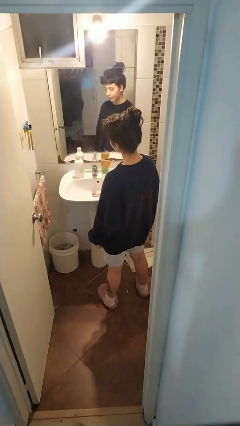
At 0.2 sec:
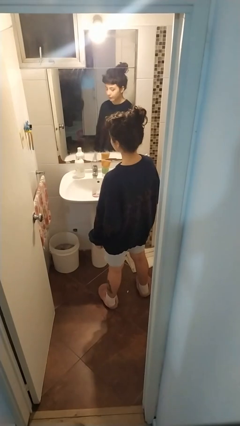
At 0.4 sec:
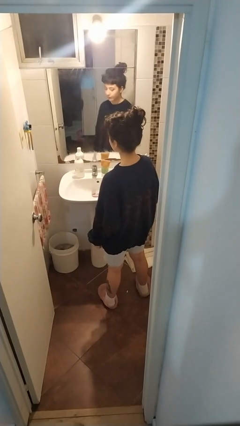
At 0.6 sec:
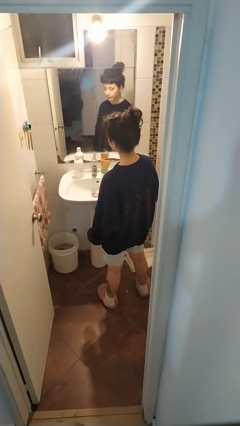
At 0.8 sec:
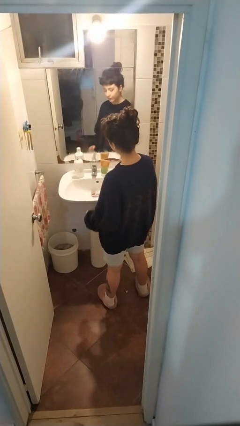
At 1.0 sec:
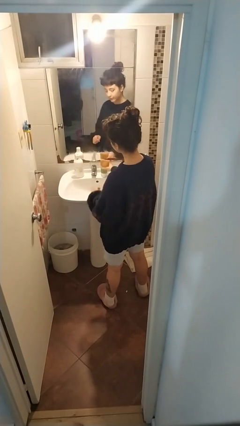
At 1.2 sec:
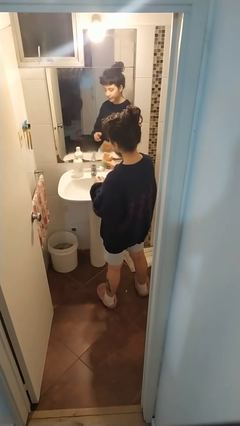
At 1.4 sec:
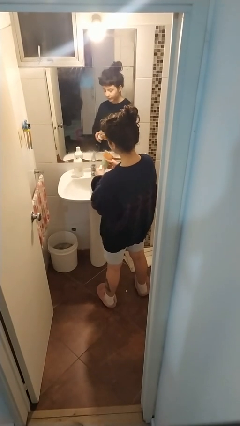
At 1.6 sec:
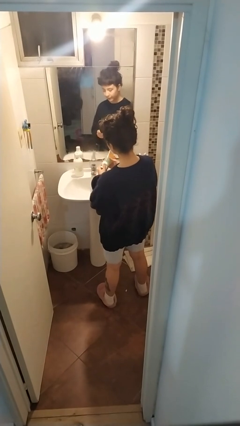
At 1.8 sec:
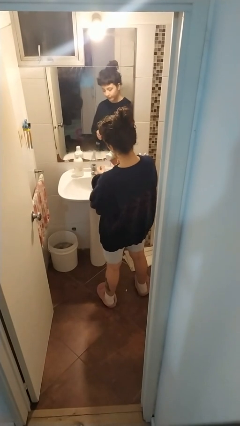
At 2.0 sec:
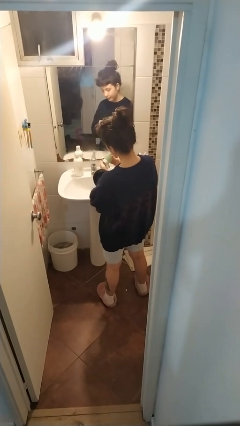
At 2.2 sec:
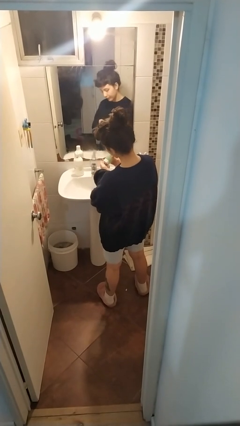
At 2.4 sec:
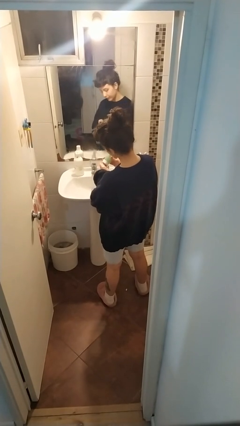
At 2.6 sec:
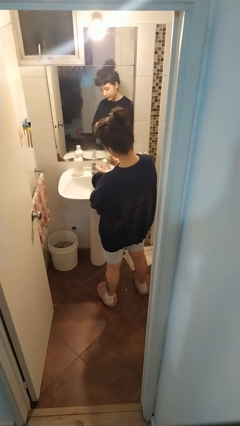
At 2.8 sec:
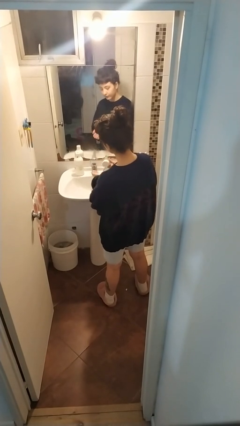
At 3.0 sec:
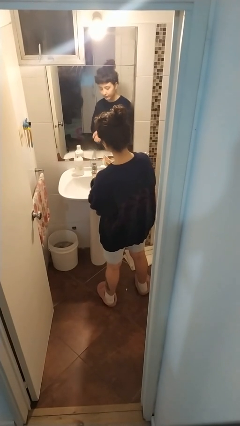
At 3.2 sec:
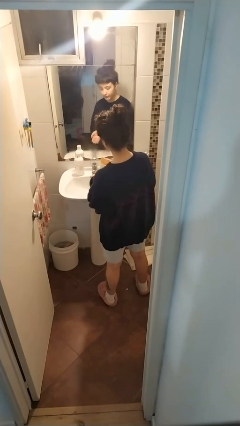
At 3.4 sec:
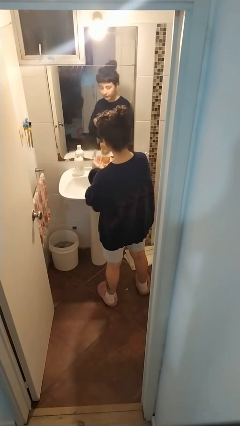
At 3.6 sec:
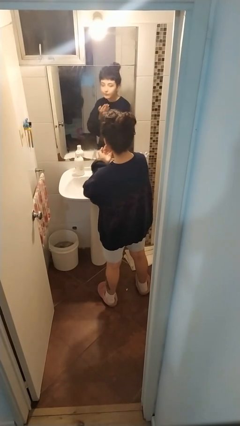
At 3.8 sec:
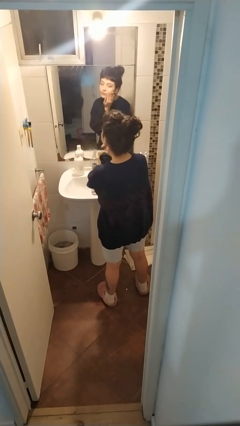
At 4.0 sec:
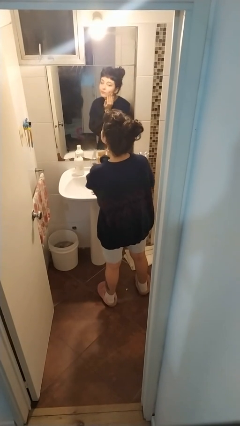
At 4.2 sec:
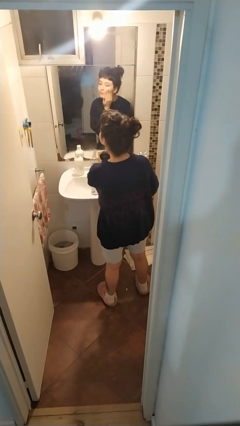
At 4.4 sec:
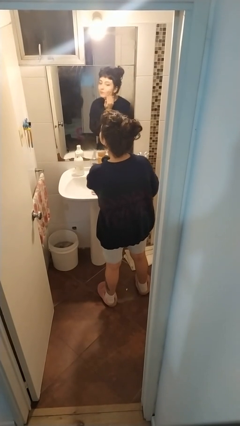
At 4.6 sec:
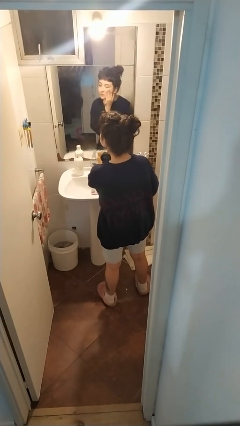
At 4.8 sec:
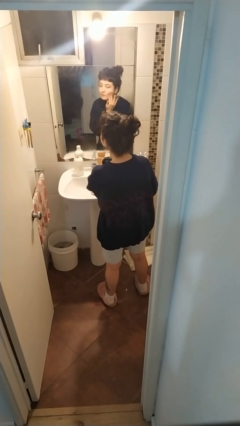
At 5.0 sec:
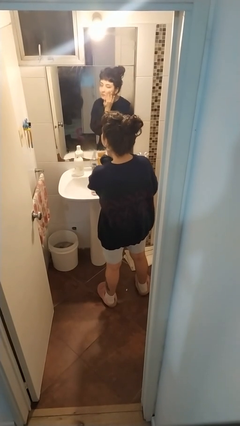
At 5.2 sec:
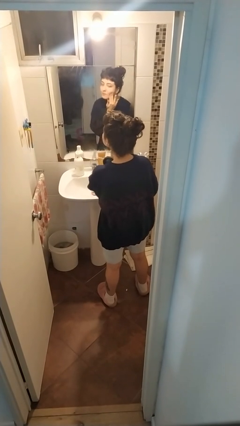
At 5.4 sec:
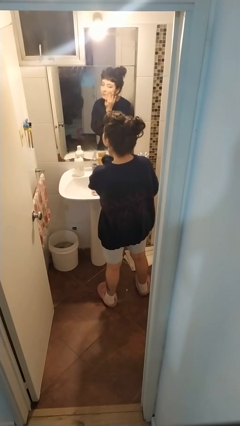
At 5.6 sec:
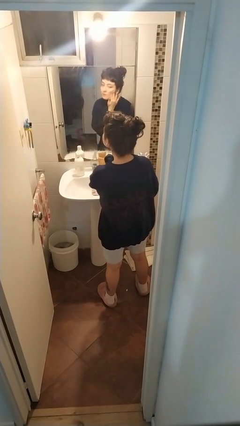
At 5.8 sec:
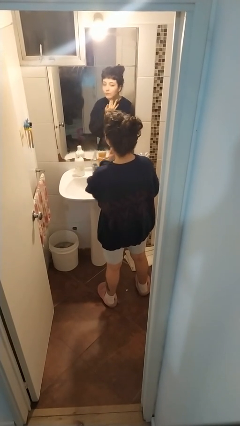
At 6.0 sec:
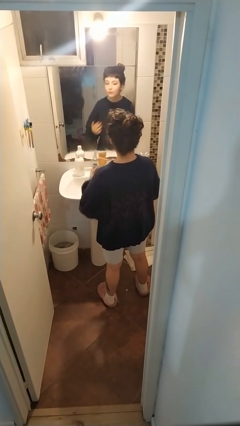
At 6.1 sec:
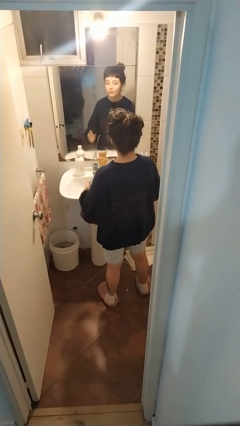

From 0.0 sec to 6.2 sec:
person applies shaving cream

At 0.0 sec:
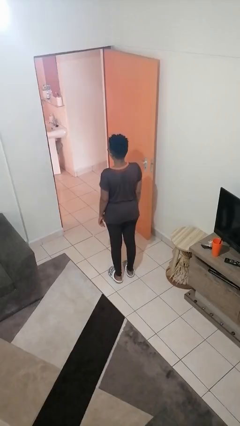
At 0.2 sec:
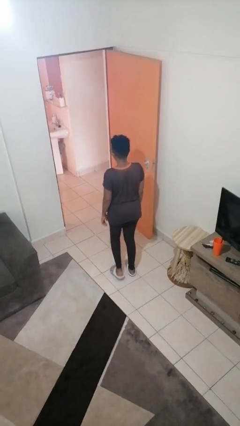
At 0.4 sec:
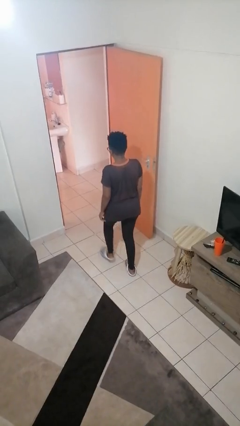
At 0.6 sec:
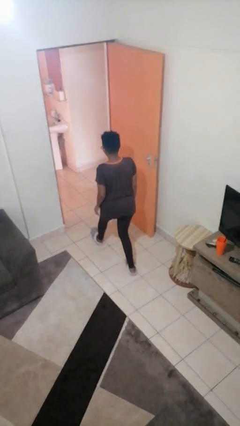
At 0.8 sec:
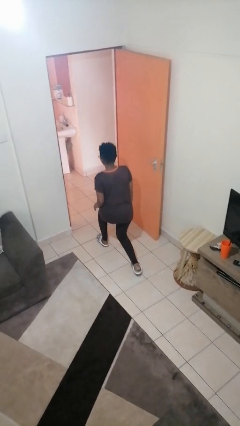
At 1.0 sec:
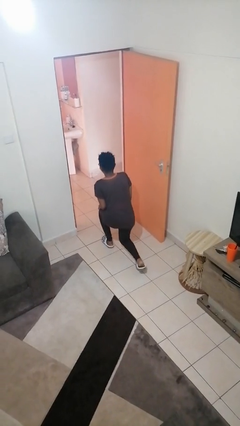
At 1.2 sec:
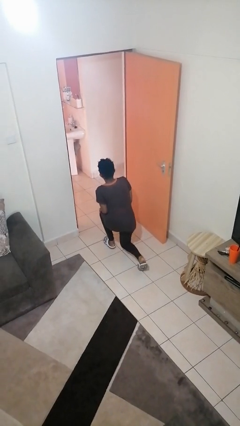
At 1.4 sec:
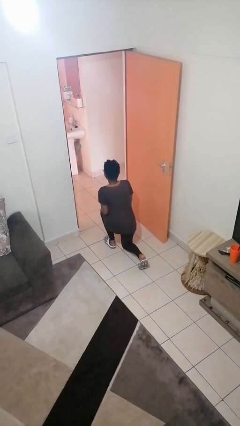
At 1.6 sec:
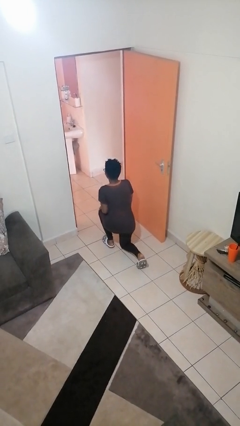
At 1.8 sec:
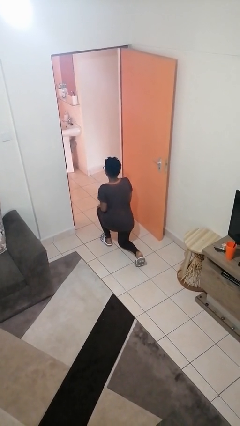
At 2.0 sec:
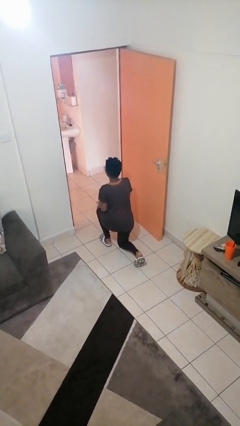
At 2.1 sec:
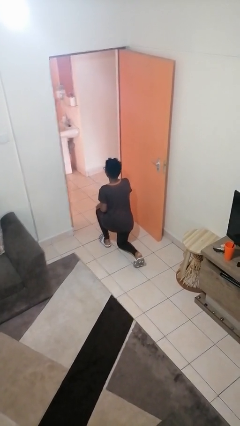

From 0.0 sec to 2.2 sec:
person kneels

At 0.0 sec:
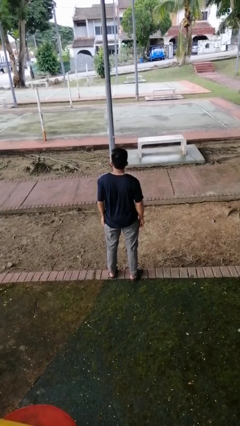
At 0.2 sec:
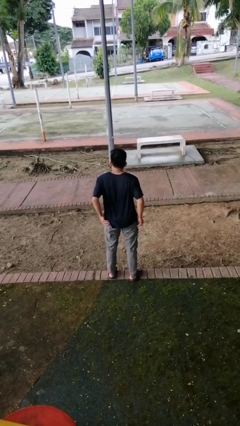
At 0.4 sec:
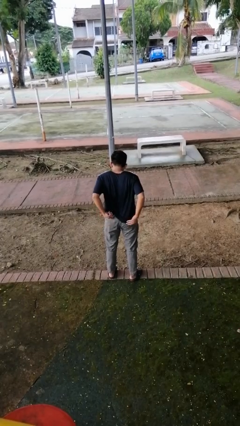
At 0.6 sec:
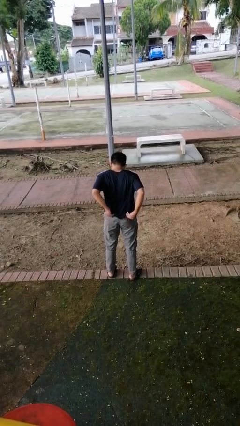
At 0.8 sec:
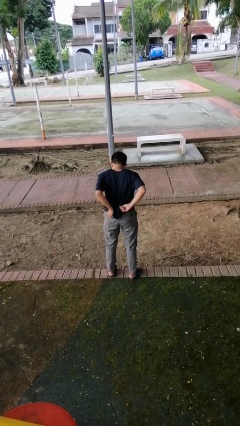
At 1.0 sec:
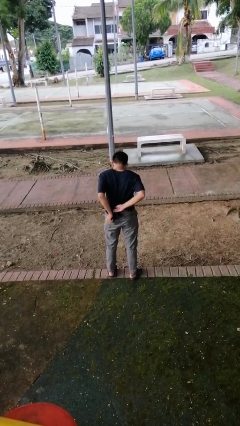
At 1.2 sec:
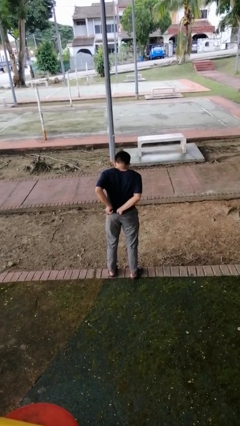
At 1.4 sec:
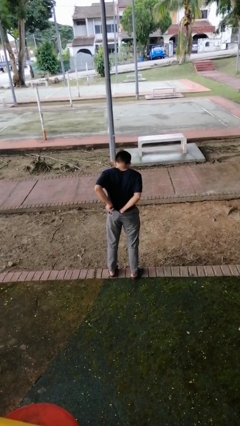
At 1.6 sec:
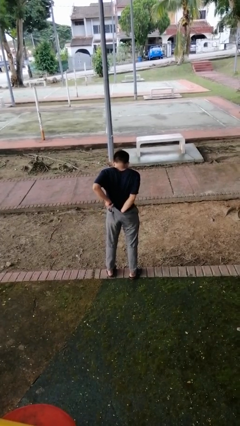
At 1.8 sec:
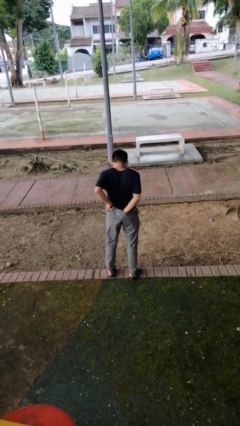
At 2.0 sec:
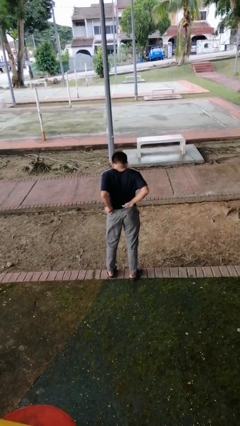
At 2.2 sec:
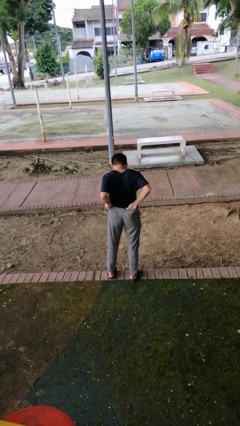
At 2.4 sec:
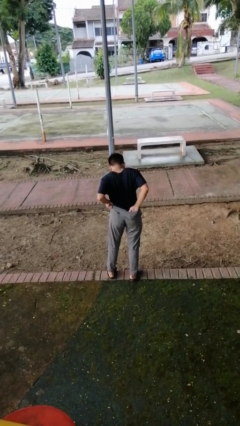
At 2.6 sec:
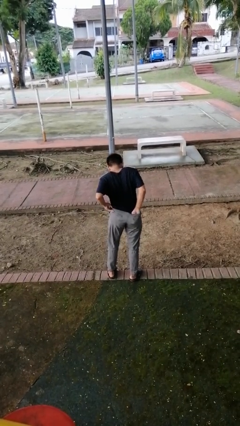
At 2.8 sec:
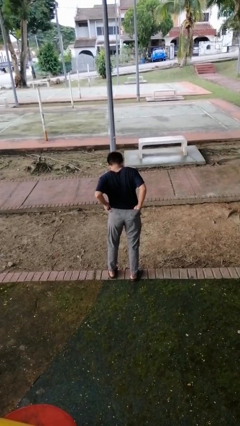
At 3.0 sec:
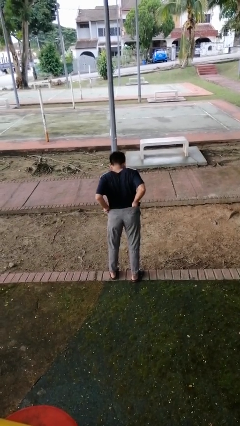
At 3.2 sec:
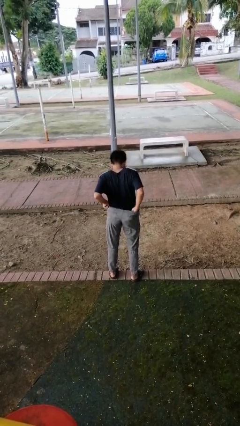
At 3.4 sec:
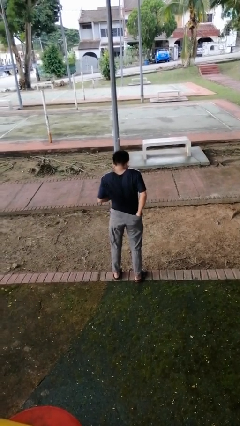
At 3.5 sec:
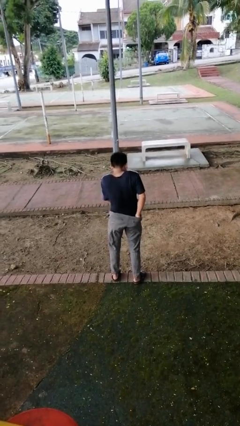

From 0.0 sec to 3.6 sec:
person tucks in shirt

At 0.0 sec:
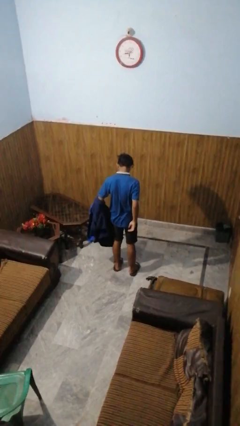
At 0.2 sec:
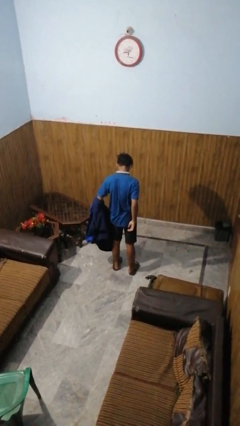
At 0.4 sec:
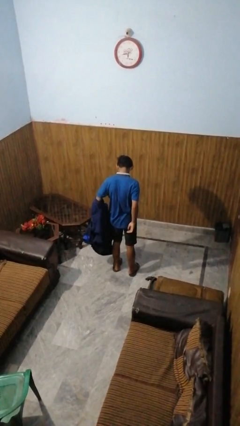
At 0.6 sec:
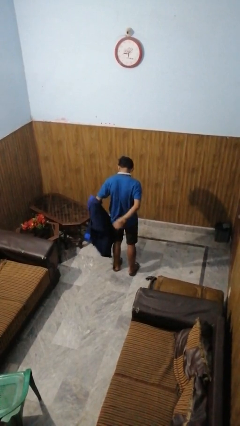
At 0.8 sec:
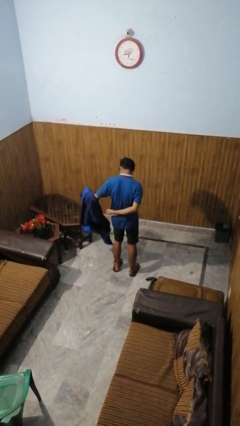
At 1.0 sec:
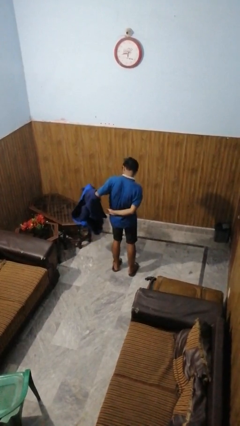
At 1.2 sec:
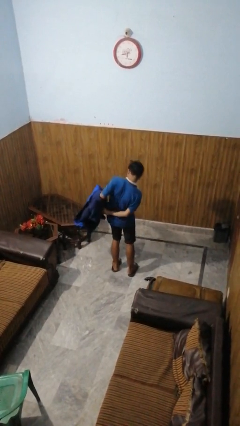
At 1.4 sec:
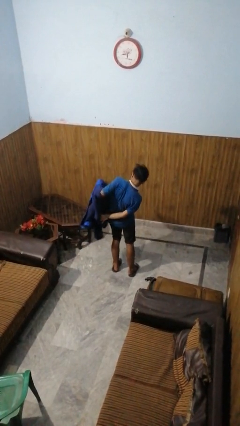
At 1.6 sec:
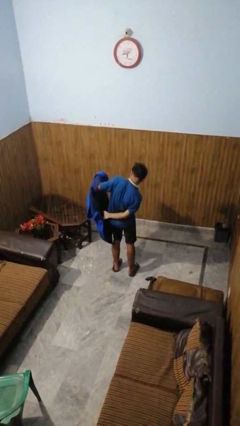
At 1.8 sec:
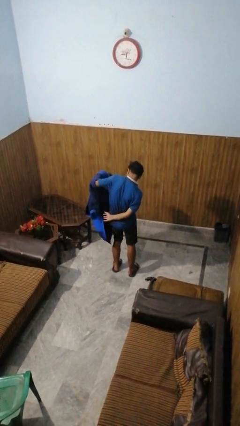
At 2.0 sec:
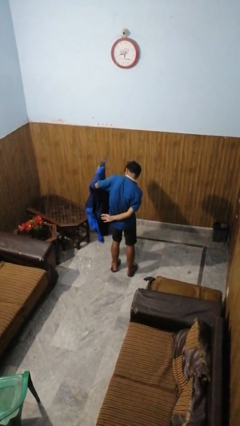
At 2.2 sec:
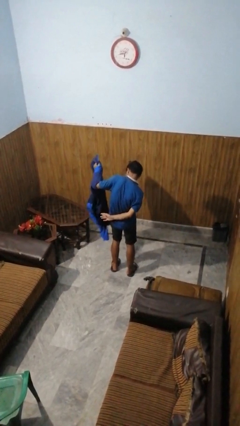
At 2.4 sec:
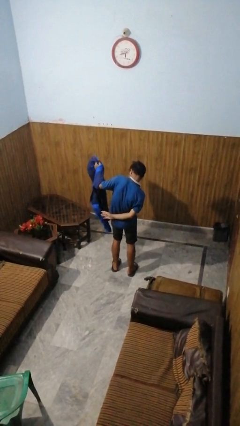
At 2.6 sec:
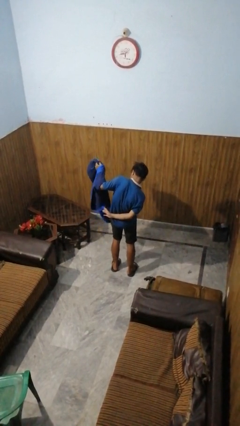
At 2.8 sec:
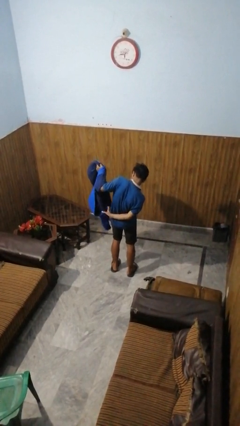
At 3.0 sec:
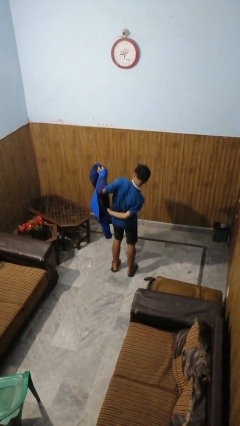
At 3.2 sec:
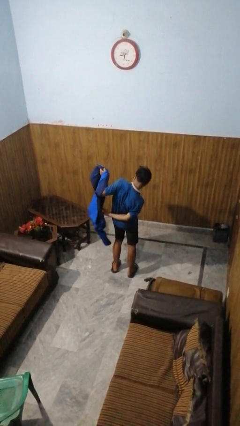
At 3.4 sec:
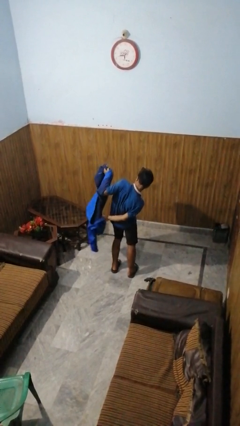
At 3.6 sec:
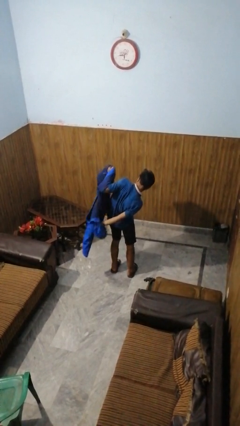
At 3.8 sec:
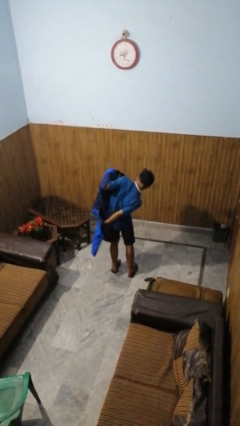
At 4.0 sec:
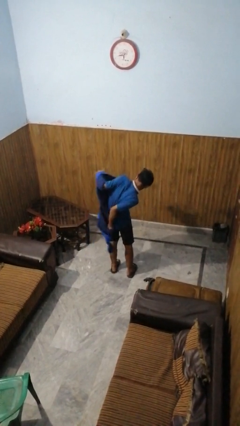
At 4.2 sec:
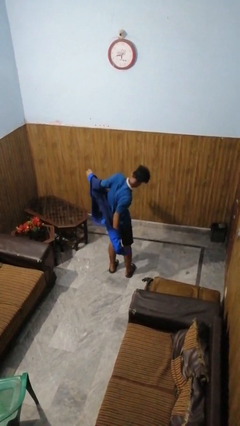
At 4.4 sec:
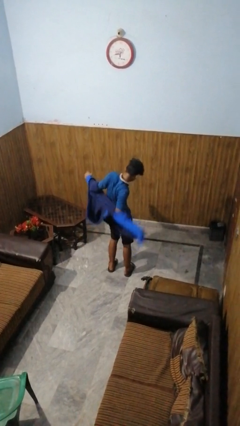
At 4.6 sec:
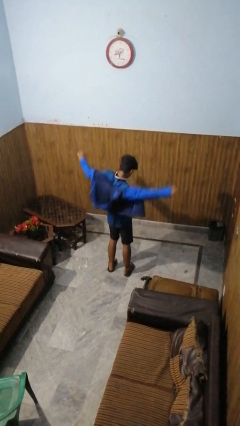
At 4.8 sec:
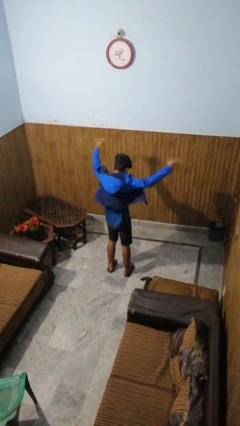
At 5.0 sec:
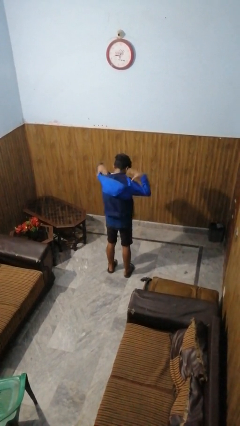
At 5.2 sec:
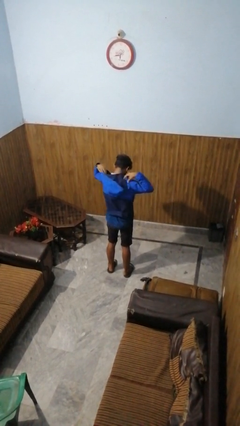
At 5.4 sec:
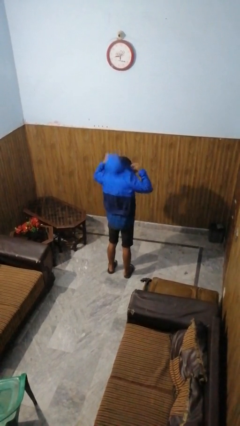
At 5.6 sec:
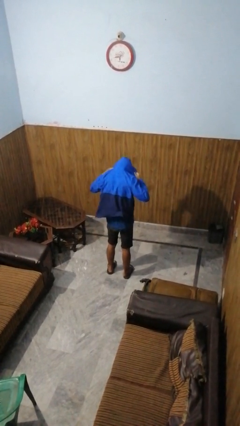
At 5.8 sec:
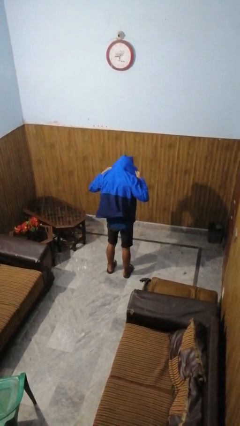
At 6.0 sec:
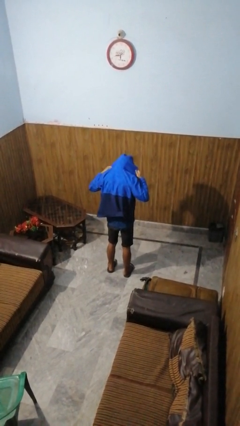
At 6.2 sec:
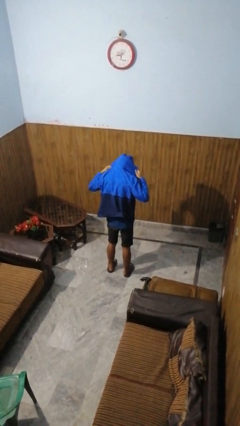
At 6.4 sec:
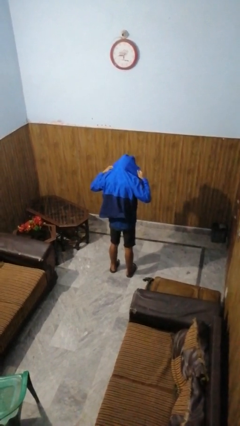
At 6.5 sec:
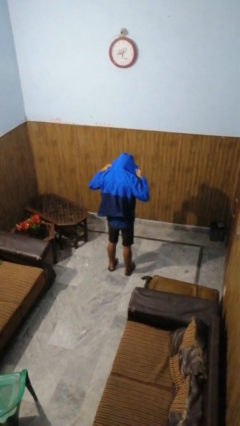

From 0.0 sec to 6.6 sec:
person puts on hoodie
